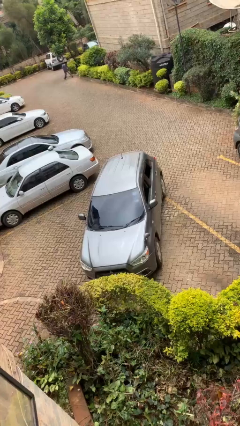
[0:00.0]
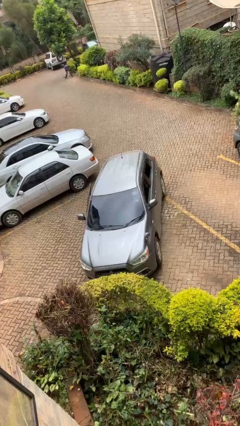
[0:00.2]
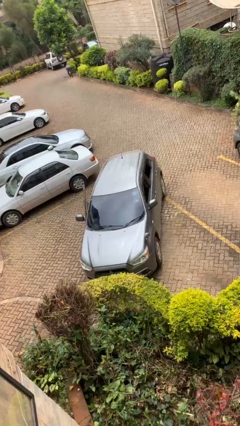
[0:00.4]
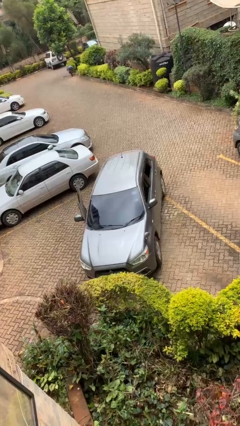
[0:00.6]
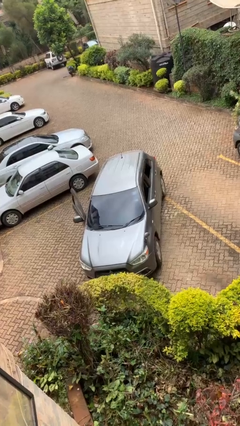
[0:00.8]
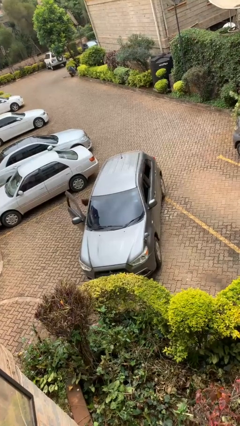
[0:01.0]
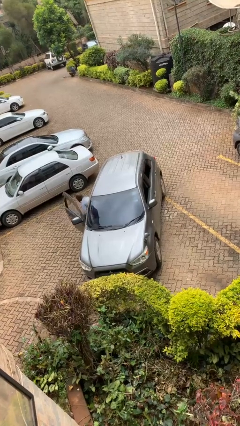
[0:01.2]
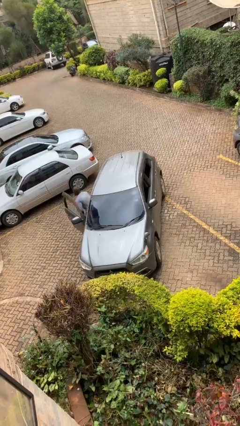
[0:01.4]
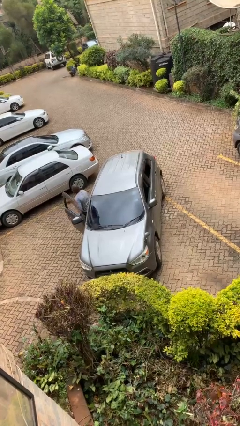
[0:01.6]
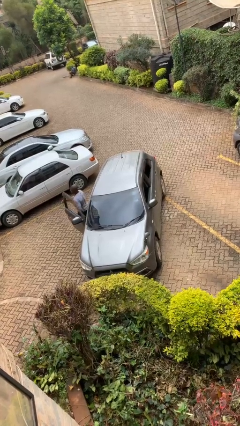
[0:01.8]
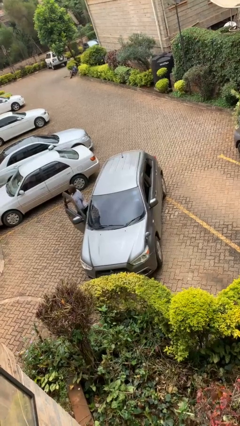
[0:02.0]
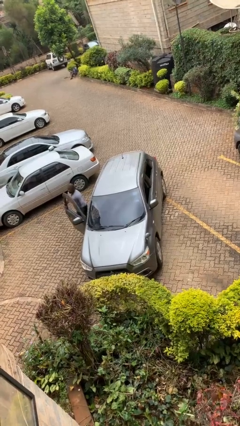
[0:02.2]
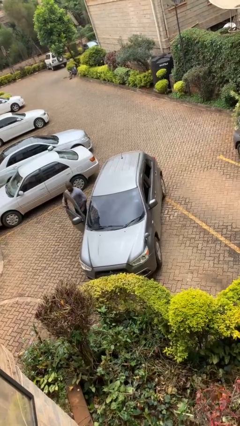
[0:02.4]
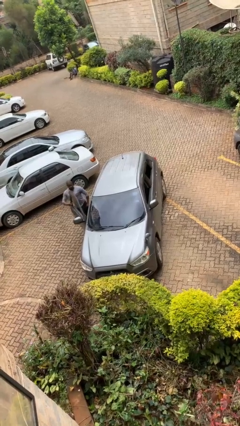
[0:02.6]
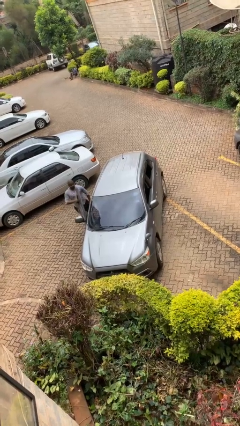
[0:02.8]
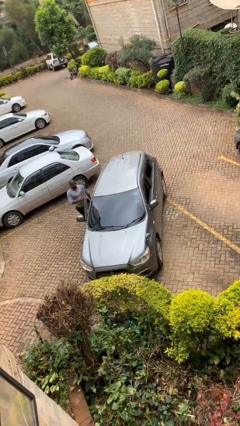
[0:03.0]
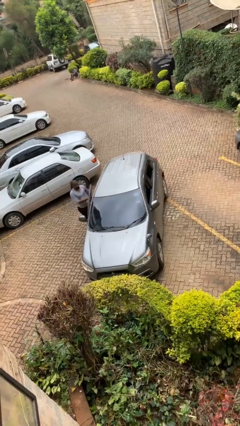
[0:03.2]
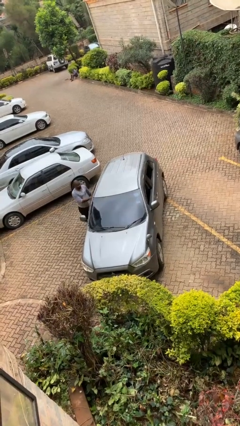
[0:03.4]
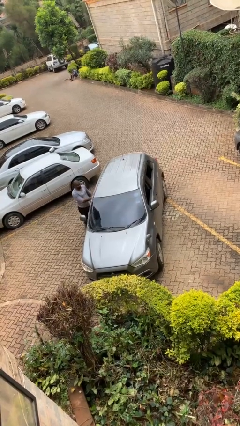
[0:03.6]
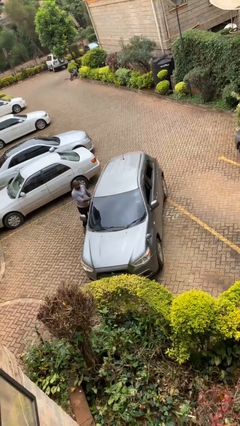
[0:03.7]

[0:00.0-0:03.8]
car drops off person

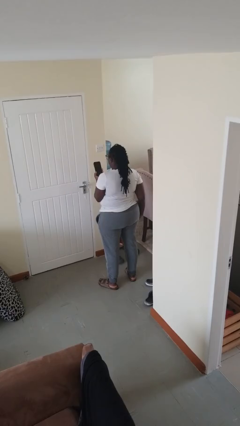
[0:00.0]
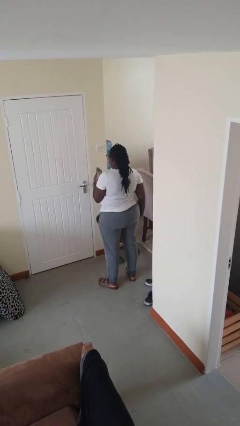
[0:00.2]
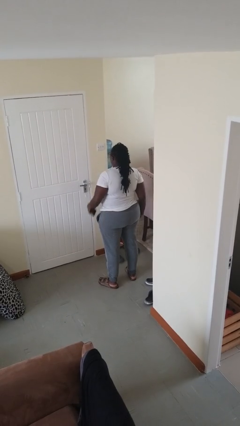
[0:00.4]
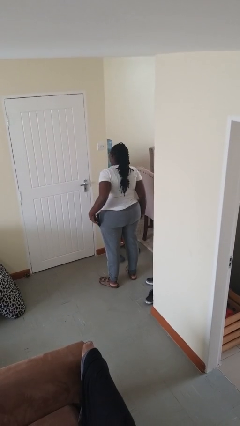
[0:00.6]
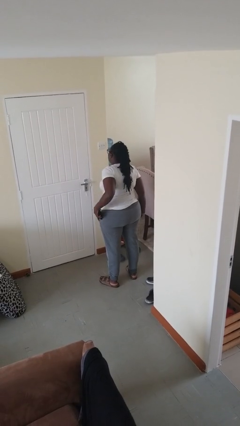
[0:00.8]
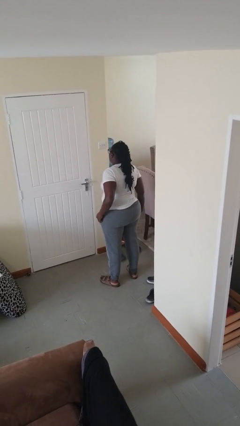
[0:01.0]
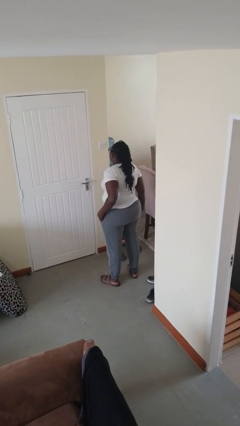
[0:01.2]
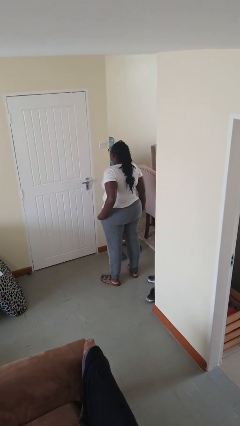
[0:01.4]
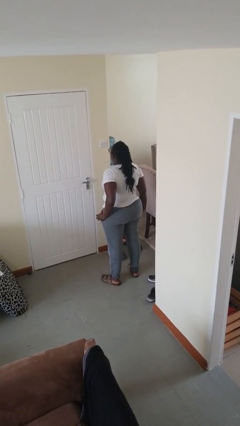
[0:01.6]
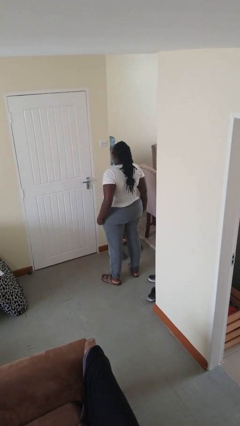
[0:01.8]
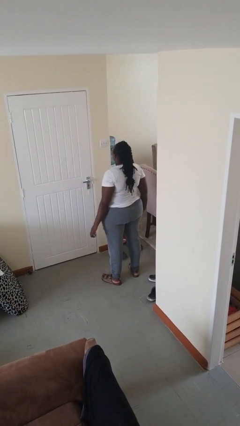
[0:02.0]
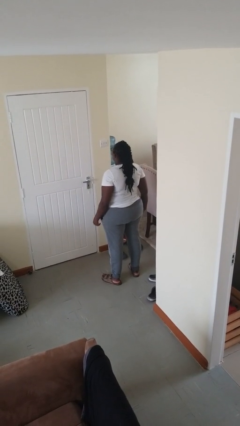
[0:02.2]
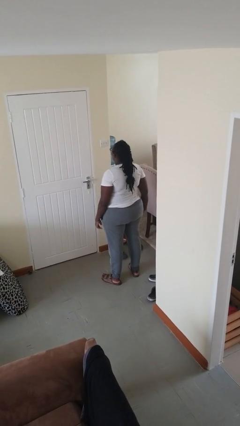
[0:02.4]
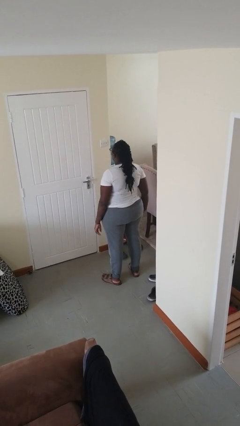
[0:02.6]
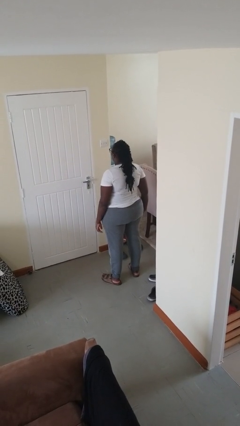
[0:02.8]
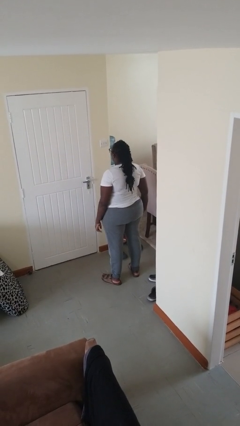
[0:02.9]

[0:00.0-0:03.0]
person puts phone into pocket

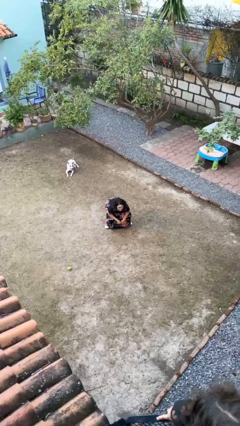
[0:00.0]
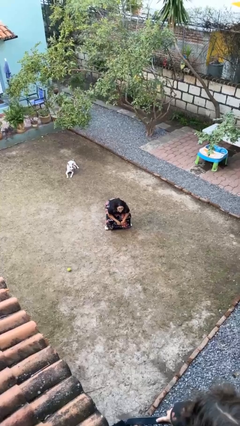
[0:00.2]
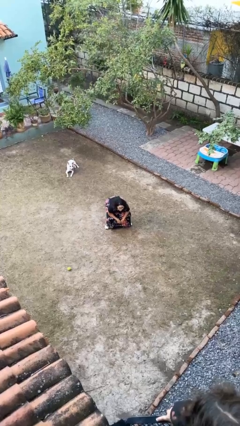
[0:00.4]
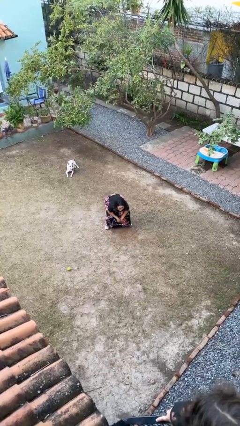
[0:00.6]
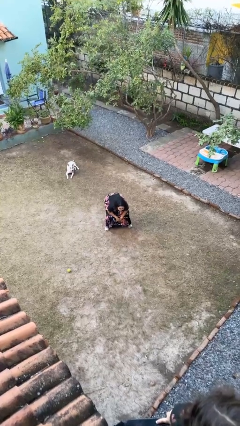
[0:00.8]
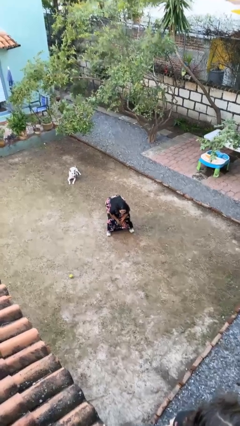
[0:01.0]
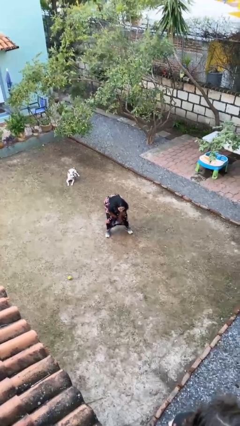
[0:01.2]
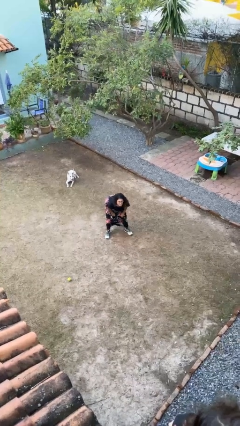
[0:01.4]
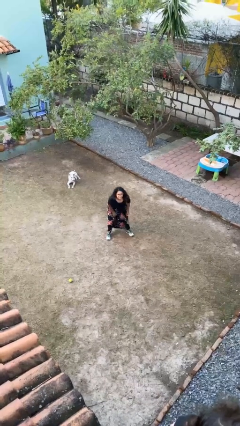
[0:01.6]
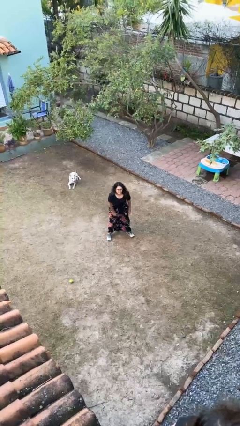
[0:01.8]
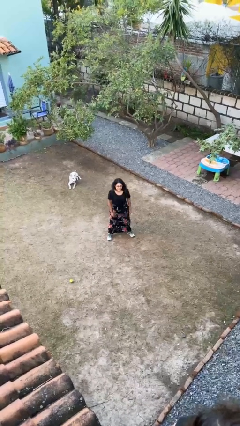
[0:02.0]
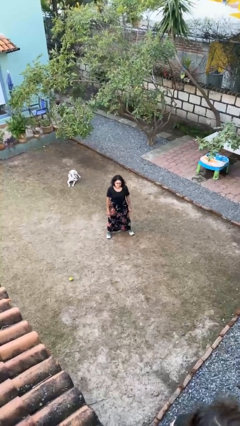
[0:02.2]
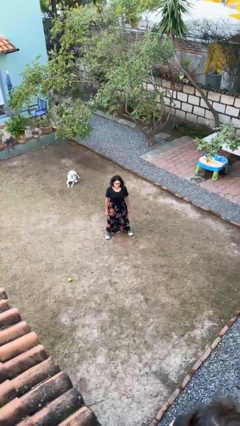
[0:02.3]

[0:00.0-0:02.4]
person stands up

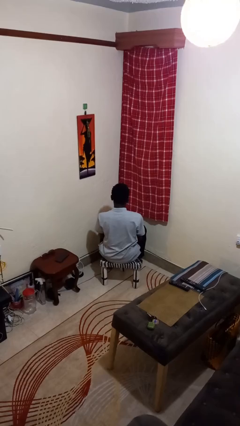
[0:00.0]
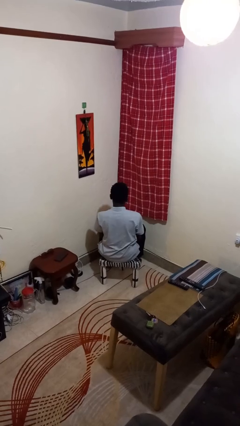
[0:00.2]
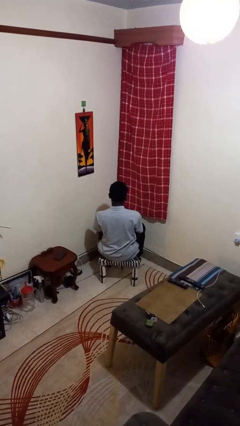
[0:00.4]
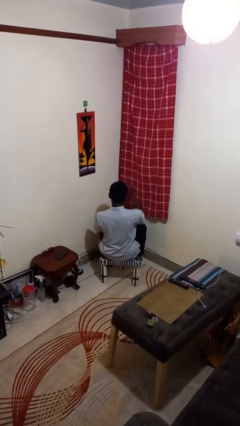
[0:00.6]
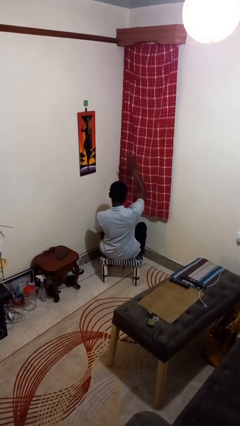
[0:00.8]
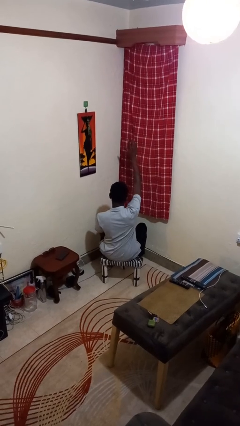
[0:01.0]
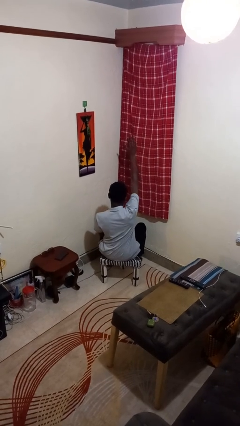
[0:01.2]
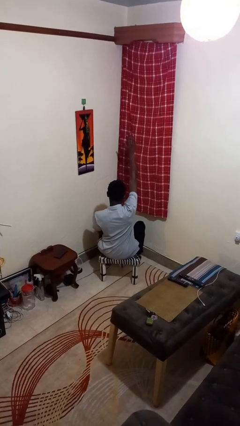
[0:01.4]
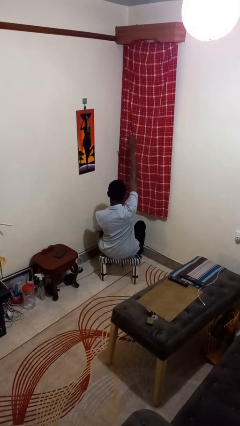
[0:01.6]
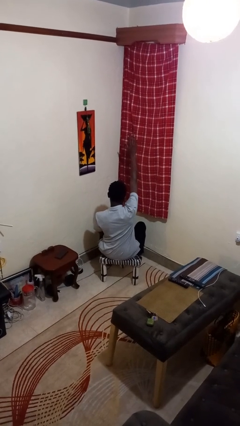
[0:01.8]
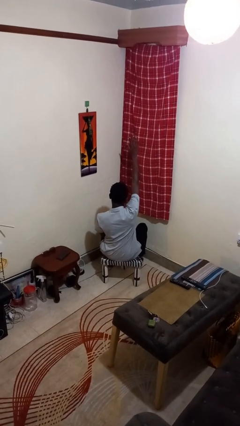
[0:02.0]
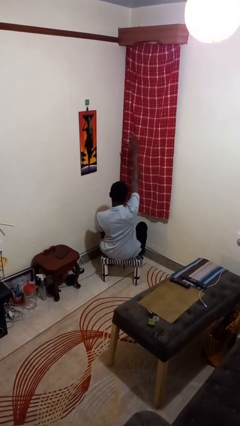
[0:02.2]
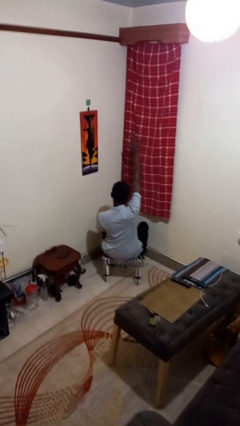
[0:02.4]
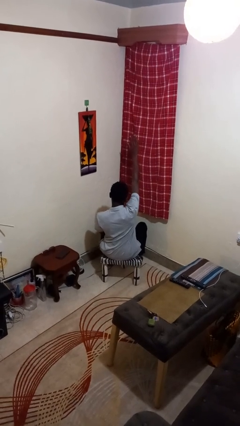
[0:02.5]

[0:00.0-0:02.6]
person gestures raise hand

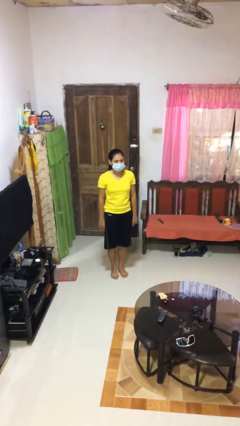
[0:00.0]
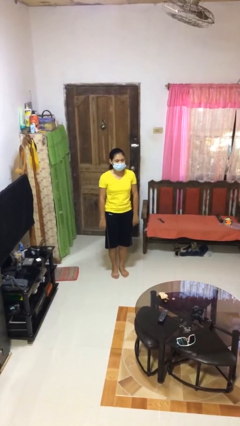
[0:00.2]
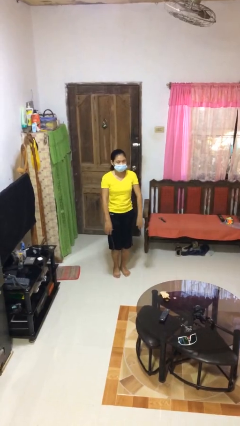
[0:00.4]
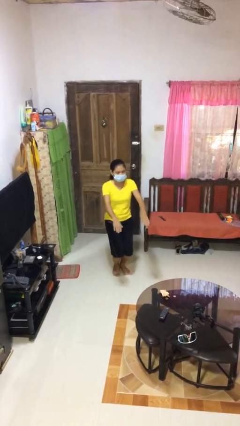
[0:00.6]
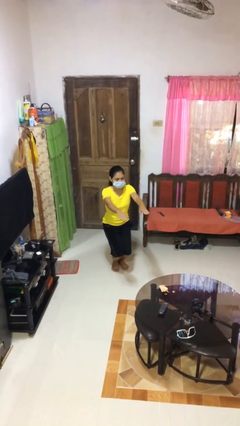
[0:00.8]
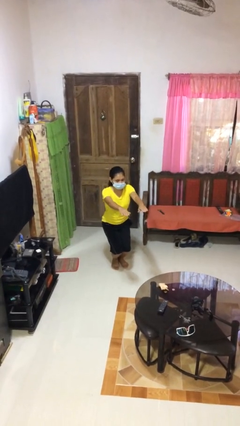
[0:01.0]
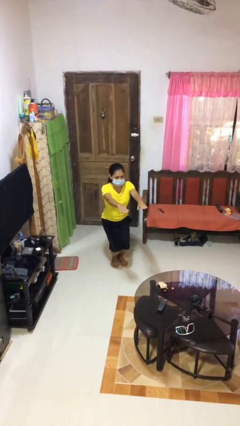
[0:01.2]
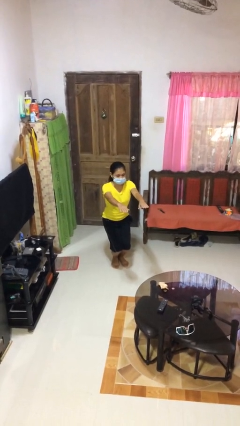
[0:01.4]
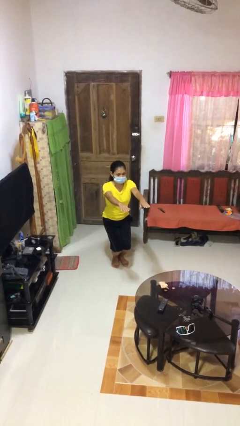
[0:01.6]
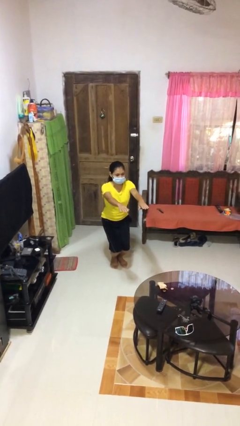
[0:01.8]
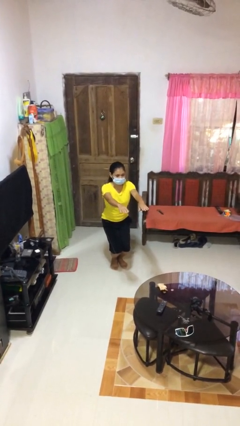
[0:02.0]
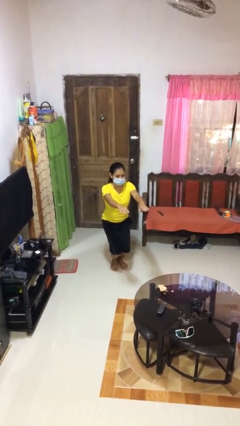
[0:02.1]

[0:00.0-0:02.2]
person squats

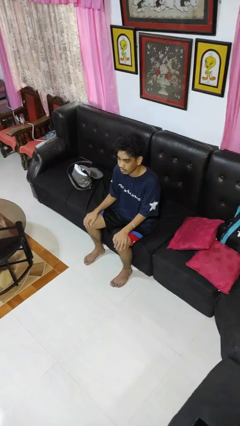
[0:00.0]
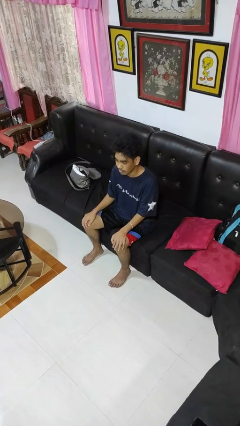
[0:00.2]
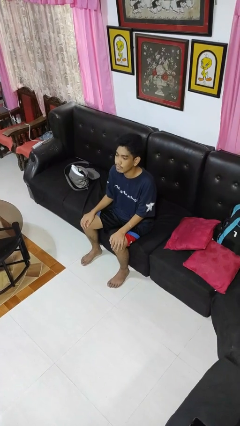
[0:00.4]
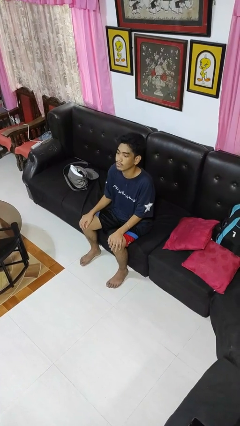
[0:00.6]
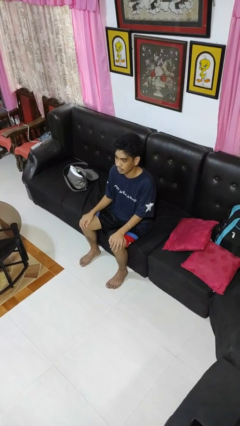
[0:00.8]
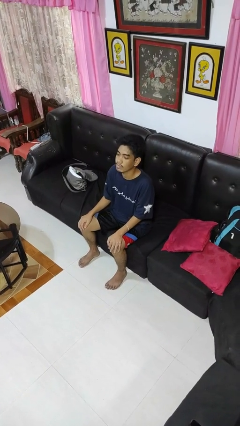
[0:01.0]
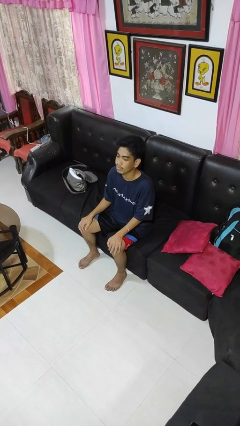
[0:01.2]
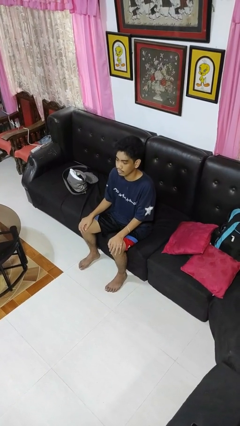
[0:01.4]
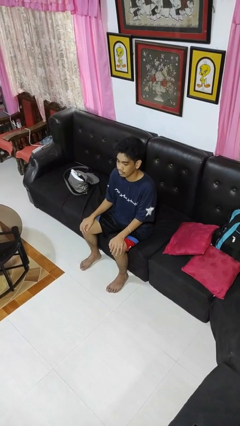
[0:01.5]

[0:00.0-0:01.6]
person nods head

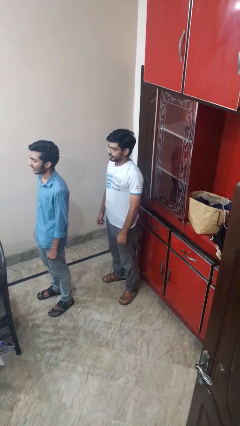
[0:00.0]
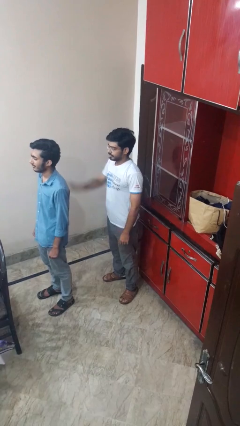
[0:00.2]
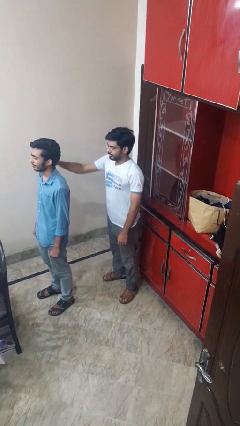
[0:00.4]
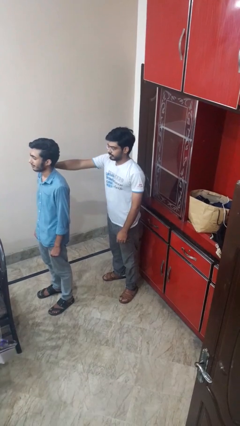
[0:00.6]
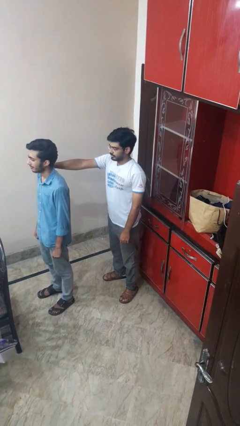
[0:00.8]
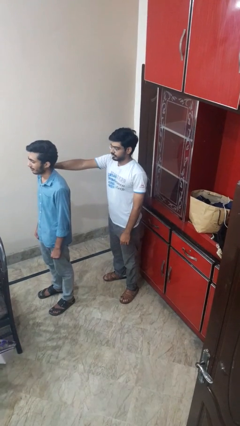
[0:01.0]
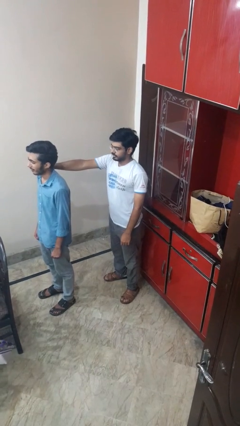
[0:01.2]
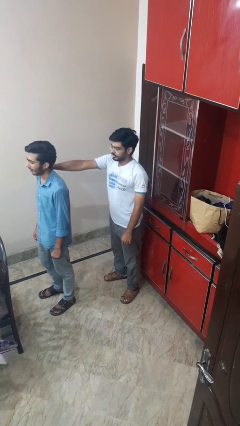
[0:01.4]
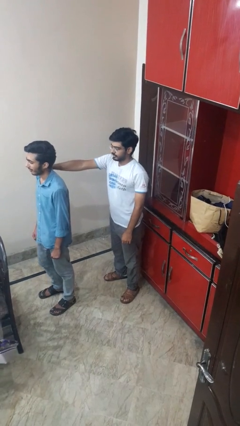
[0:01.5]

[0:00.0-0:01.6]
person grabs person by shoulder

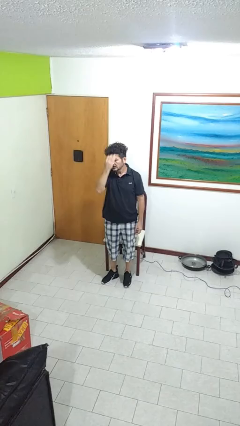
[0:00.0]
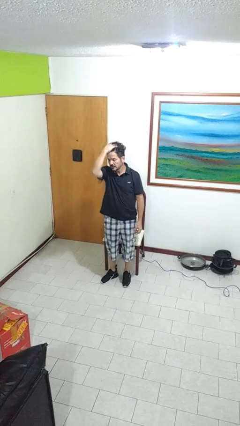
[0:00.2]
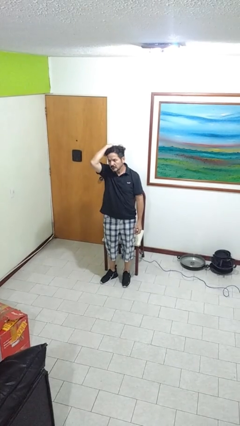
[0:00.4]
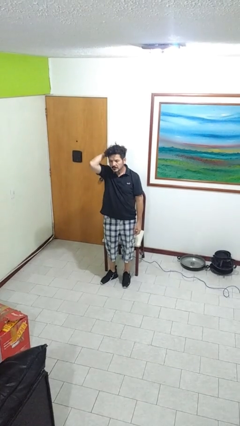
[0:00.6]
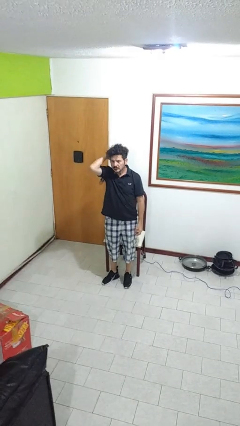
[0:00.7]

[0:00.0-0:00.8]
person strokes hair